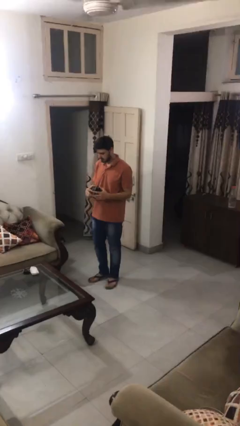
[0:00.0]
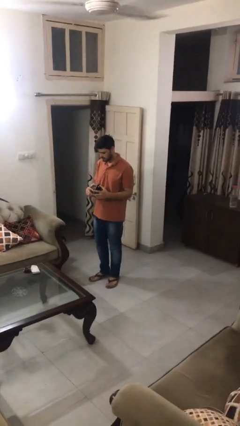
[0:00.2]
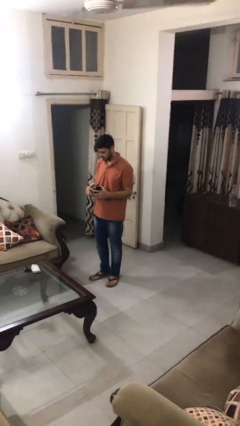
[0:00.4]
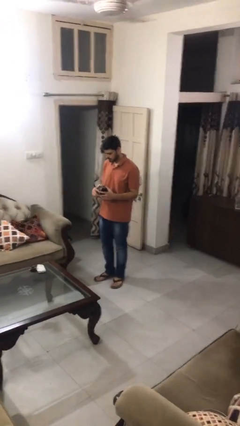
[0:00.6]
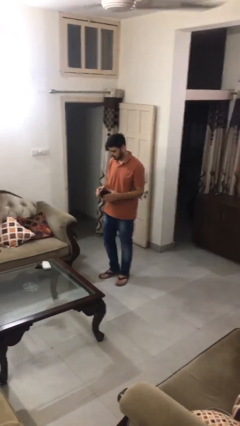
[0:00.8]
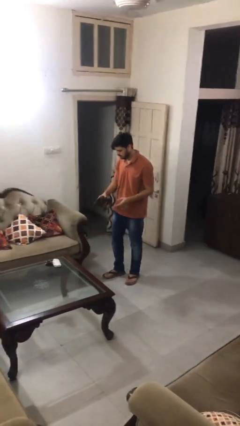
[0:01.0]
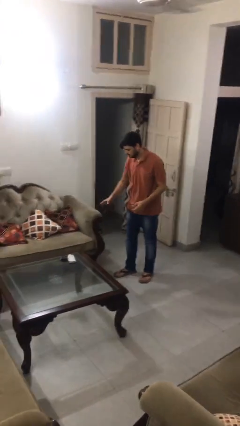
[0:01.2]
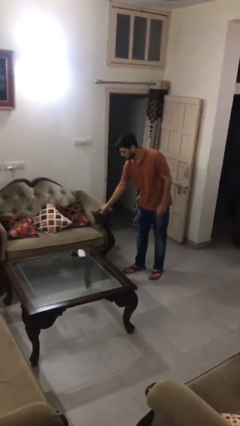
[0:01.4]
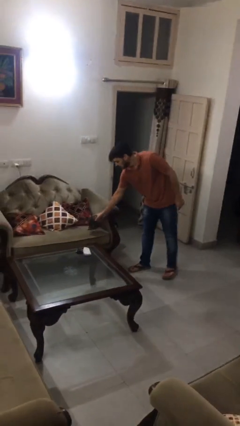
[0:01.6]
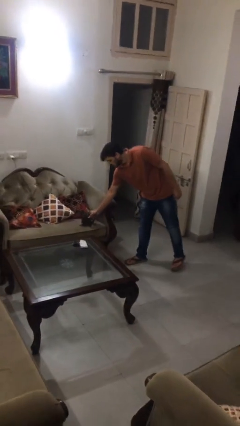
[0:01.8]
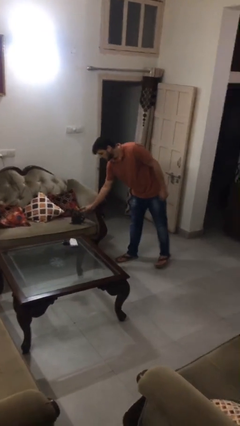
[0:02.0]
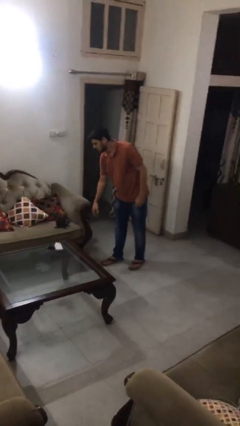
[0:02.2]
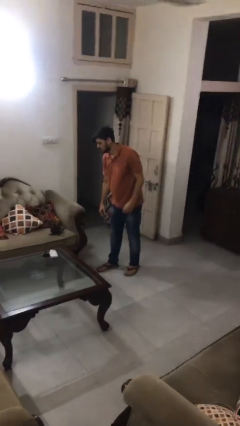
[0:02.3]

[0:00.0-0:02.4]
person puts down object on couch

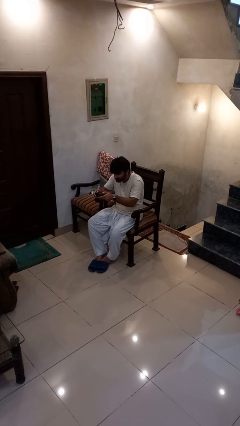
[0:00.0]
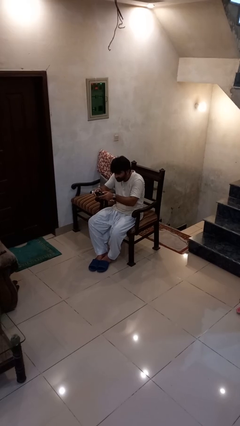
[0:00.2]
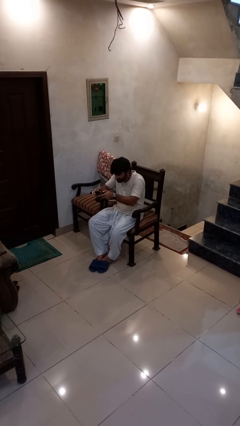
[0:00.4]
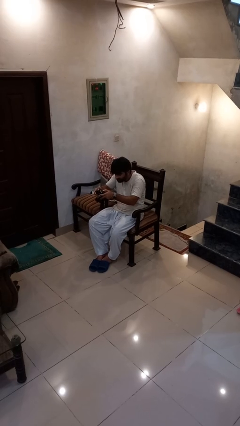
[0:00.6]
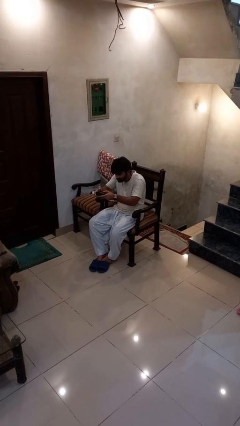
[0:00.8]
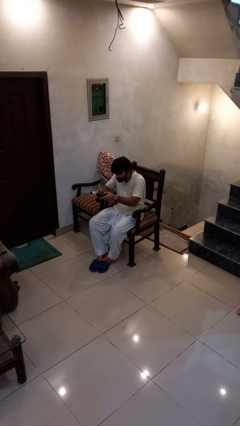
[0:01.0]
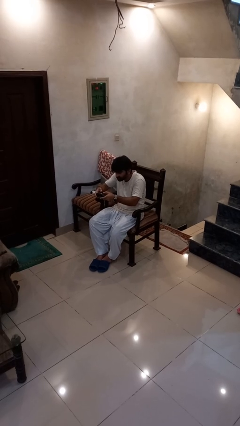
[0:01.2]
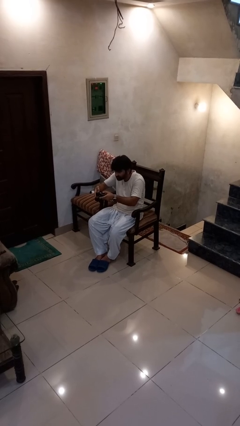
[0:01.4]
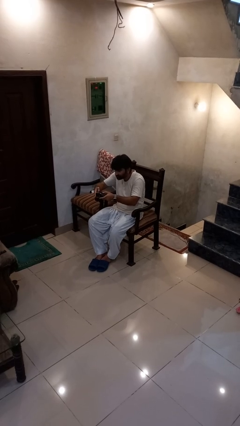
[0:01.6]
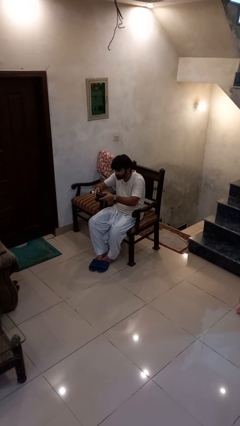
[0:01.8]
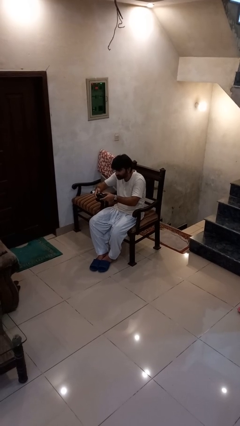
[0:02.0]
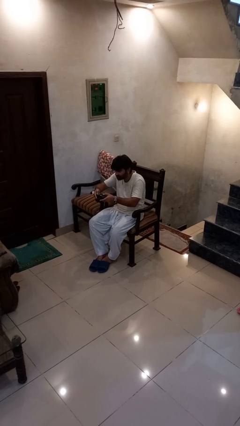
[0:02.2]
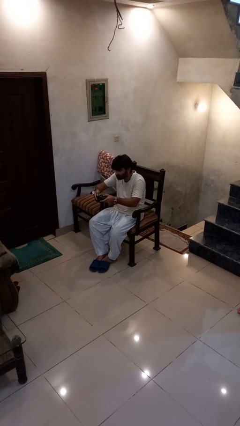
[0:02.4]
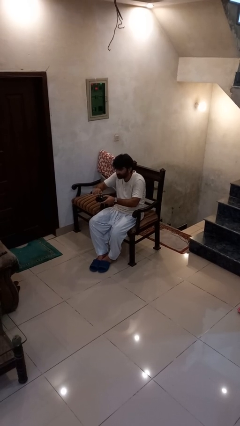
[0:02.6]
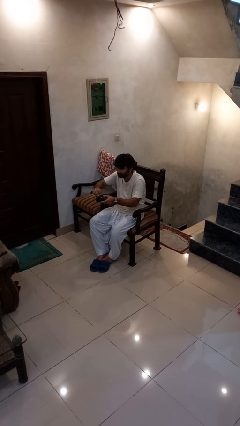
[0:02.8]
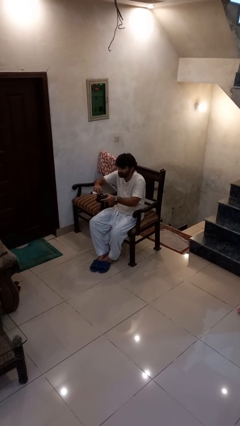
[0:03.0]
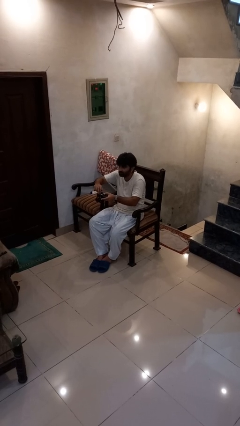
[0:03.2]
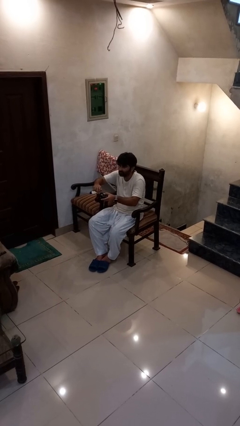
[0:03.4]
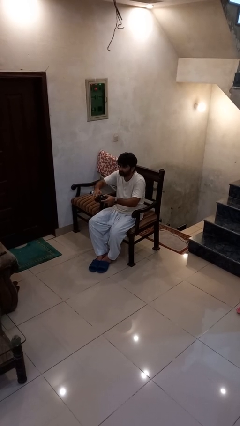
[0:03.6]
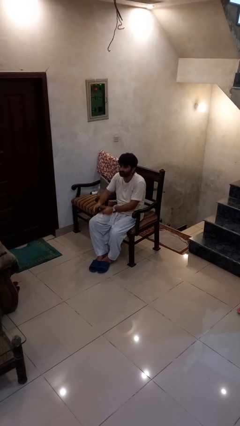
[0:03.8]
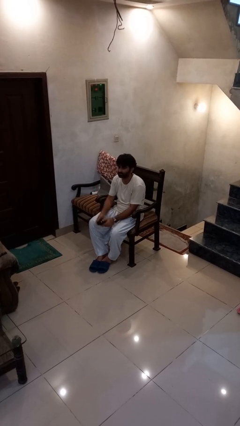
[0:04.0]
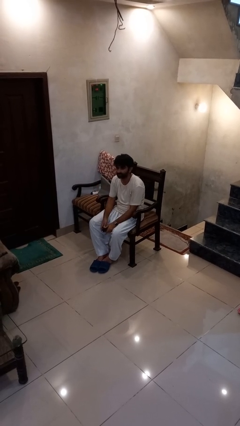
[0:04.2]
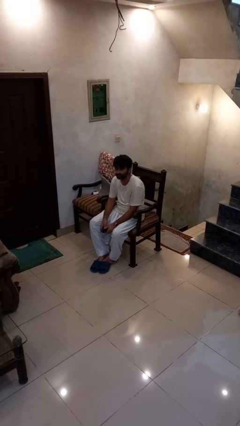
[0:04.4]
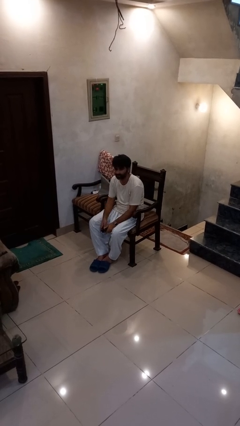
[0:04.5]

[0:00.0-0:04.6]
person interacts with handheld game

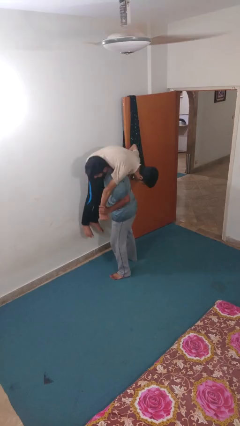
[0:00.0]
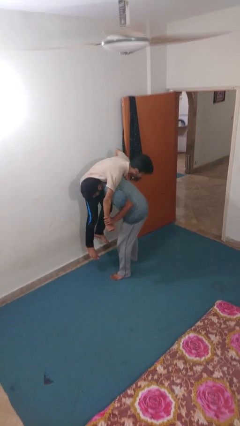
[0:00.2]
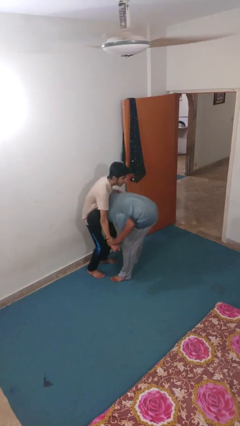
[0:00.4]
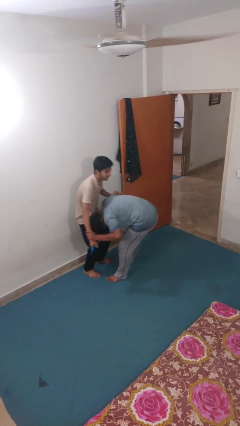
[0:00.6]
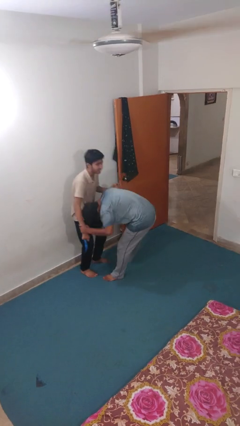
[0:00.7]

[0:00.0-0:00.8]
person puts down person

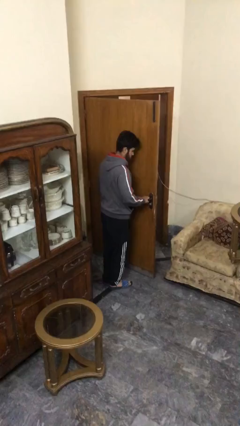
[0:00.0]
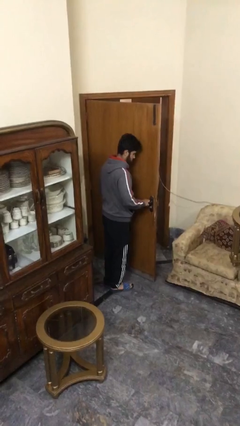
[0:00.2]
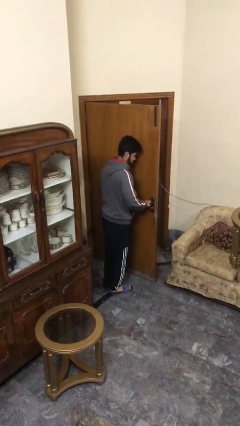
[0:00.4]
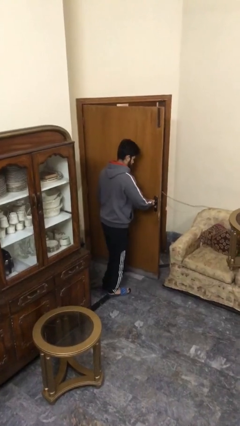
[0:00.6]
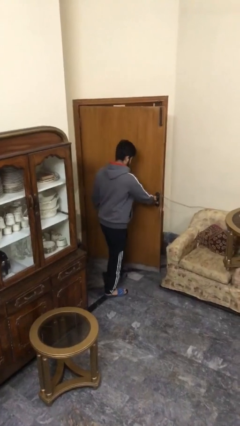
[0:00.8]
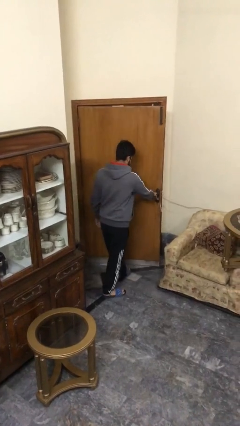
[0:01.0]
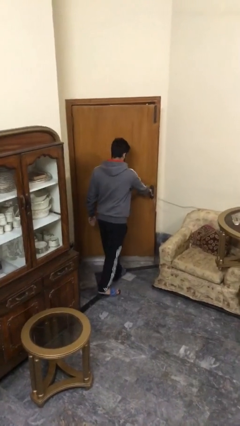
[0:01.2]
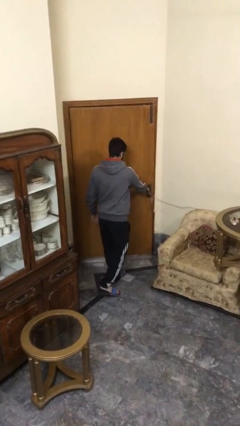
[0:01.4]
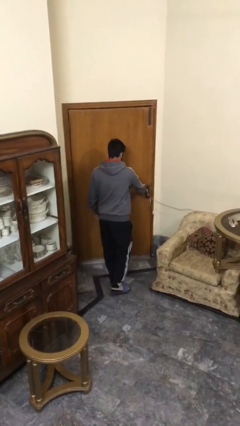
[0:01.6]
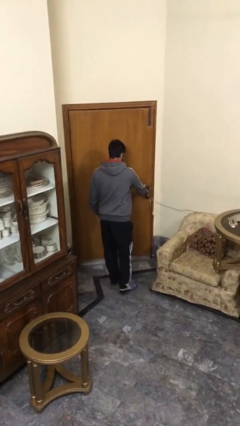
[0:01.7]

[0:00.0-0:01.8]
person closes facility door

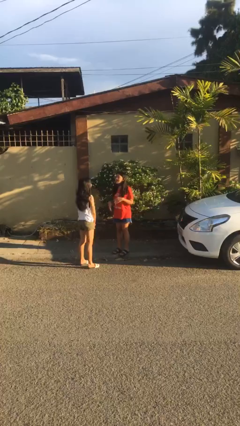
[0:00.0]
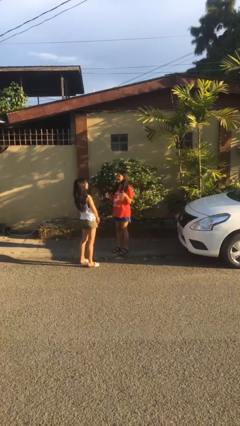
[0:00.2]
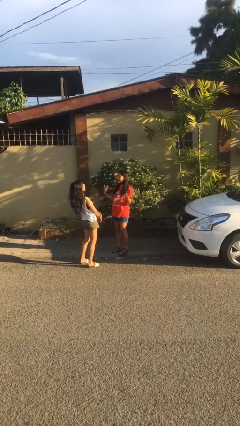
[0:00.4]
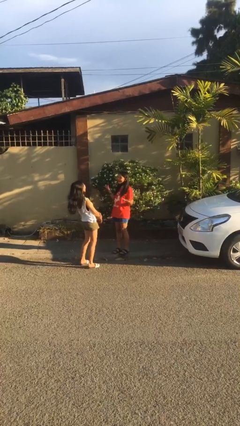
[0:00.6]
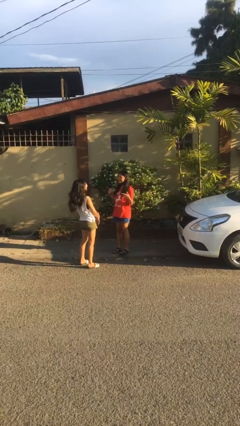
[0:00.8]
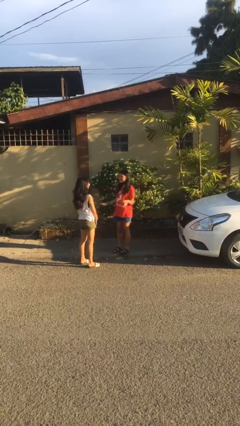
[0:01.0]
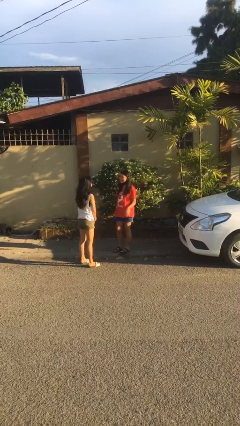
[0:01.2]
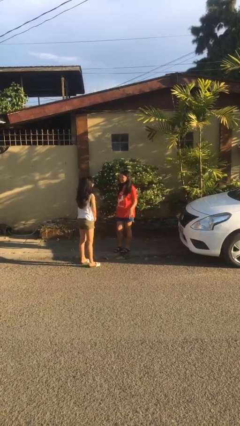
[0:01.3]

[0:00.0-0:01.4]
person laughs with person

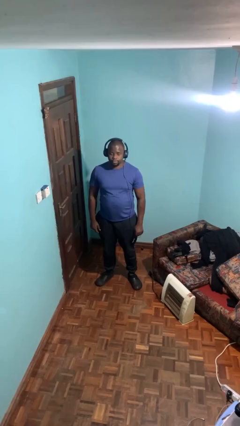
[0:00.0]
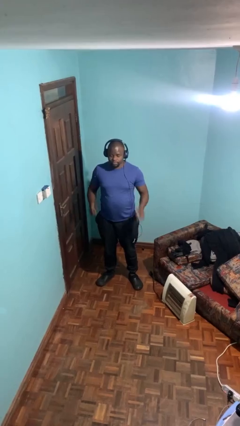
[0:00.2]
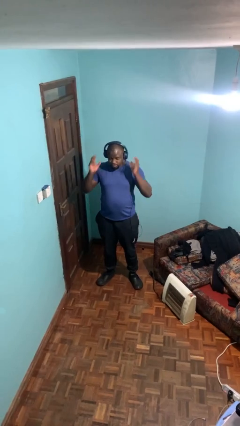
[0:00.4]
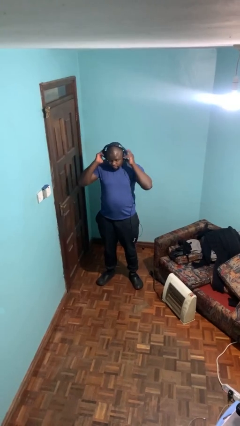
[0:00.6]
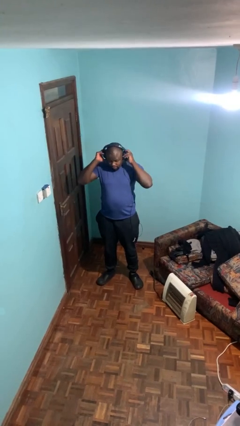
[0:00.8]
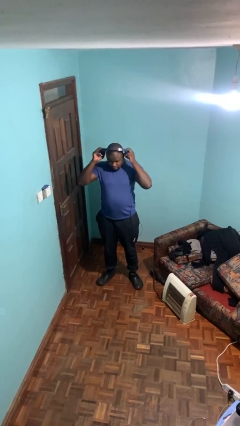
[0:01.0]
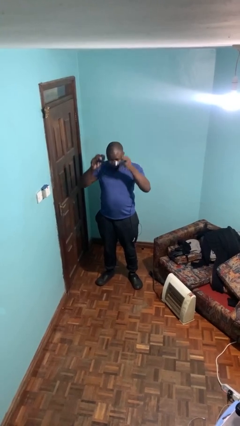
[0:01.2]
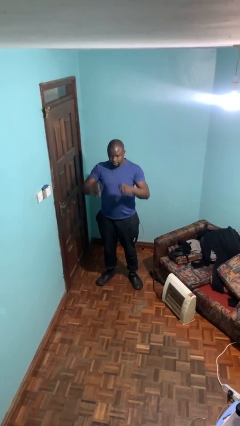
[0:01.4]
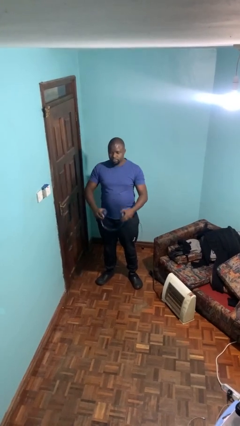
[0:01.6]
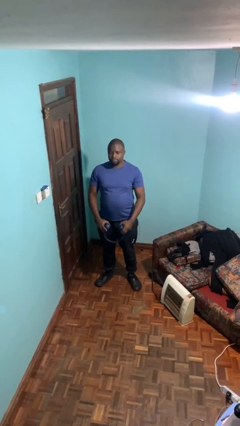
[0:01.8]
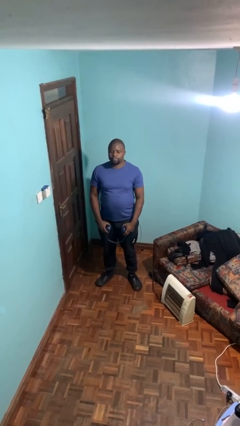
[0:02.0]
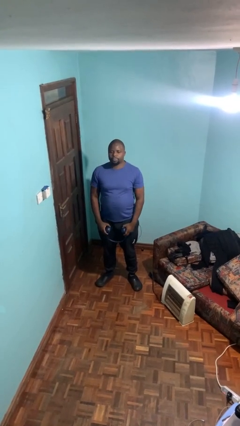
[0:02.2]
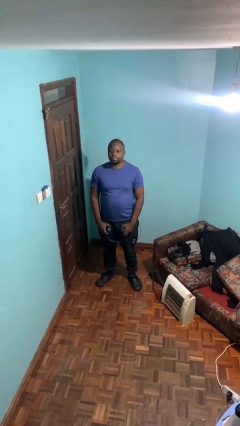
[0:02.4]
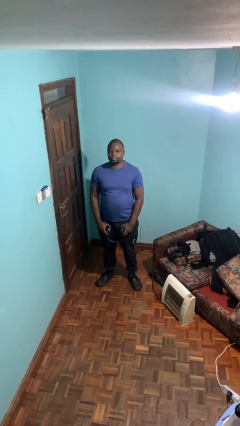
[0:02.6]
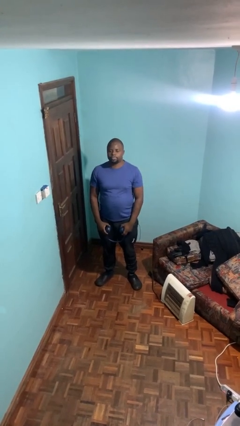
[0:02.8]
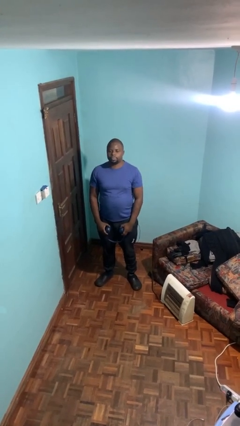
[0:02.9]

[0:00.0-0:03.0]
person takes off headphones

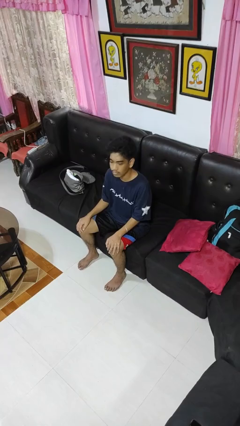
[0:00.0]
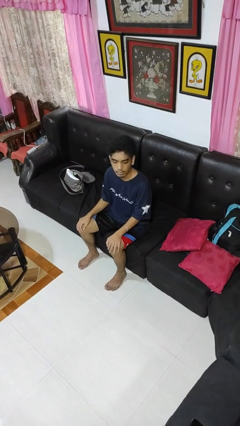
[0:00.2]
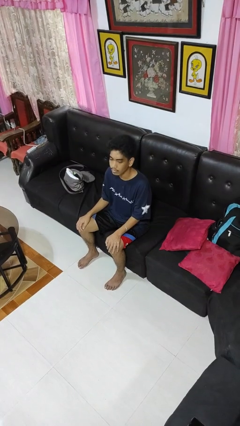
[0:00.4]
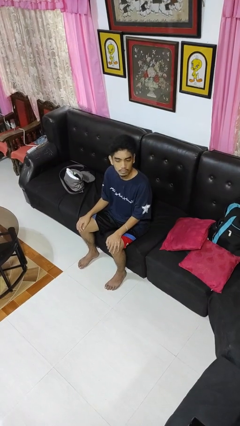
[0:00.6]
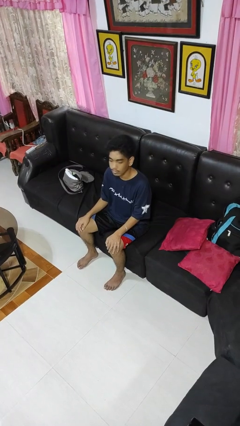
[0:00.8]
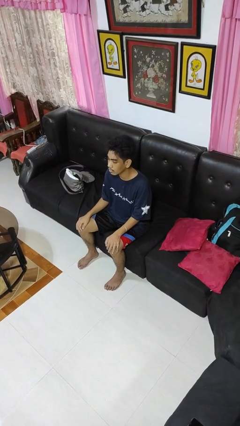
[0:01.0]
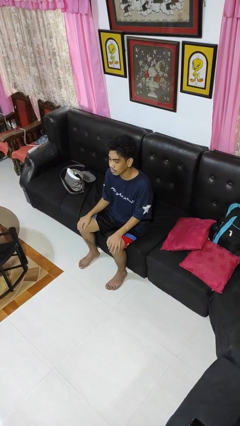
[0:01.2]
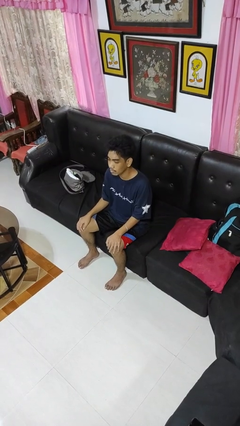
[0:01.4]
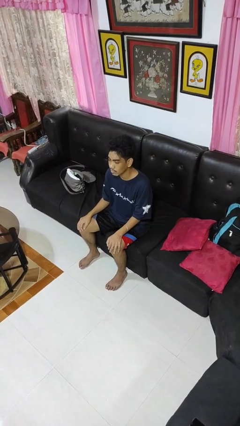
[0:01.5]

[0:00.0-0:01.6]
person shakes head

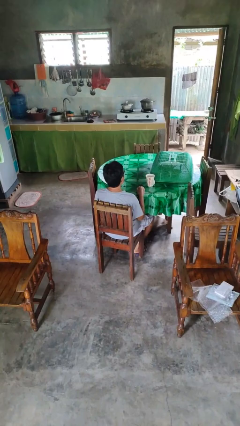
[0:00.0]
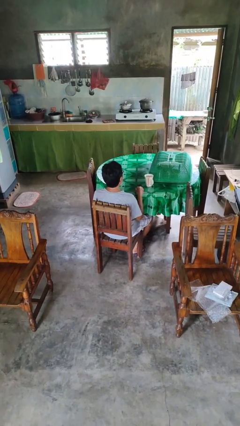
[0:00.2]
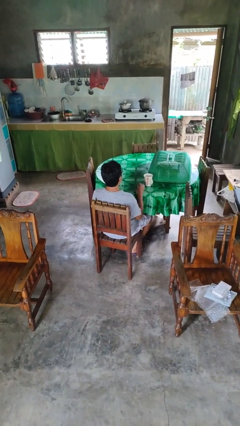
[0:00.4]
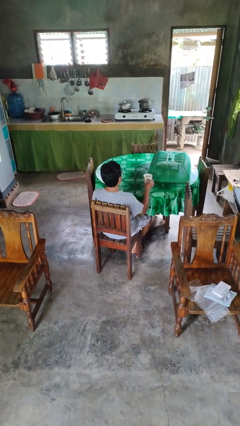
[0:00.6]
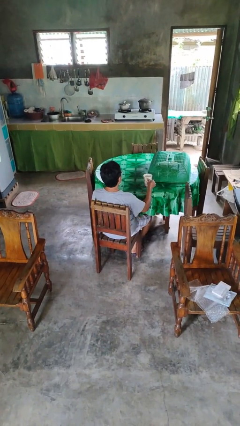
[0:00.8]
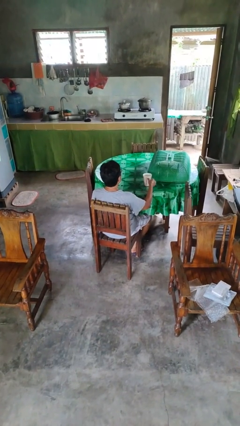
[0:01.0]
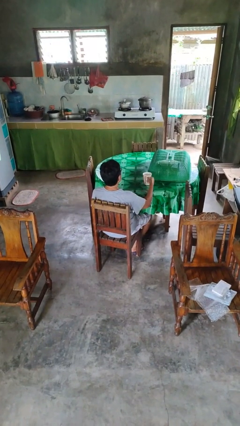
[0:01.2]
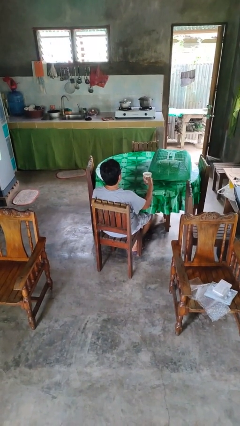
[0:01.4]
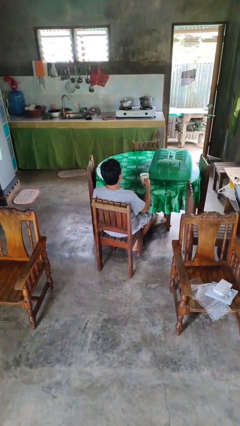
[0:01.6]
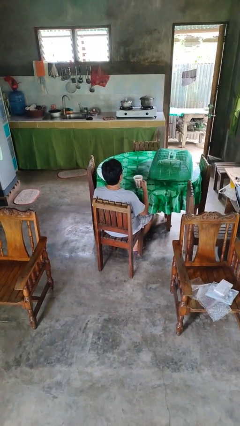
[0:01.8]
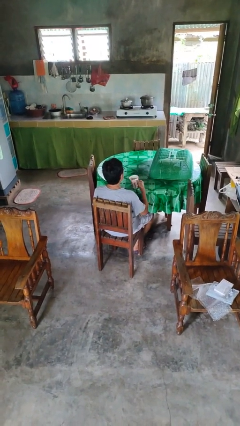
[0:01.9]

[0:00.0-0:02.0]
person picks up object from table
